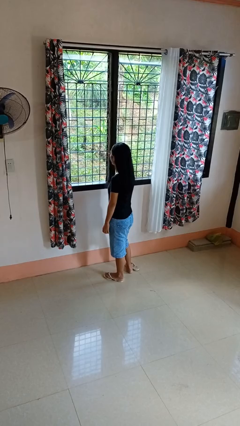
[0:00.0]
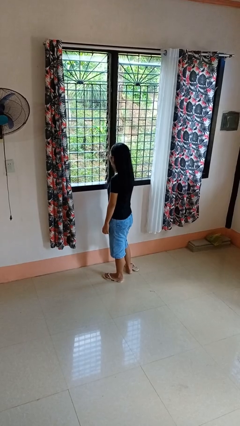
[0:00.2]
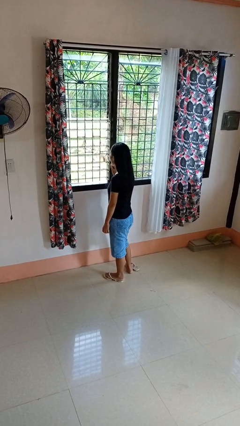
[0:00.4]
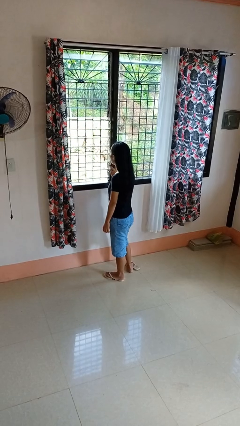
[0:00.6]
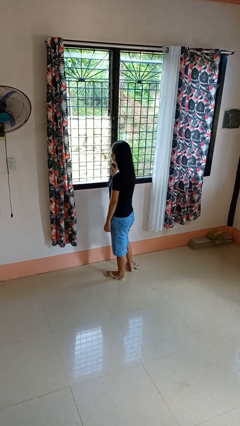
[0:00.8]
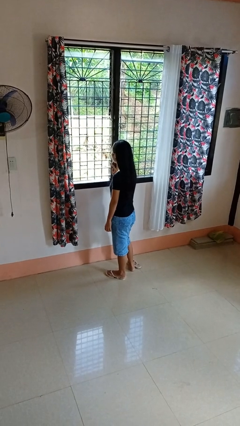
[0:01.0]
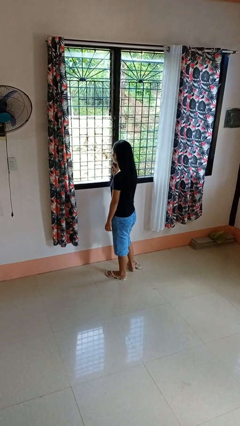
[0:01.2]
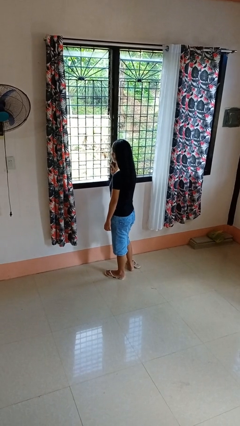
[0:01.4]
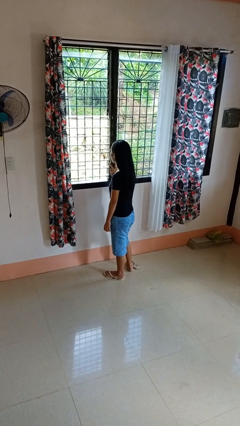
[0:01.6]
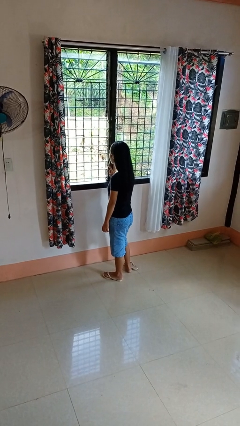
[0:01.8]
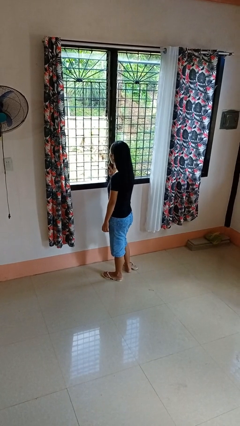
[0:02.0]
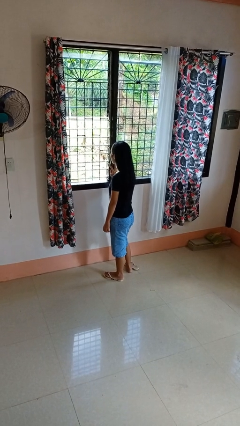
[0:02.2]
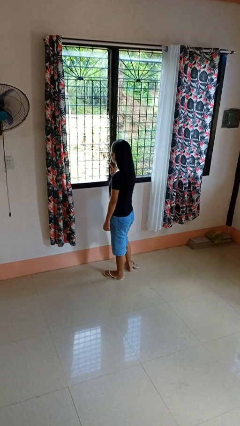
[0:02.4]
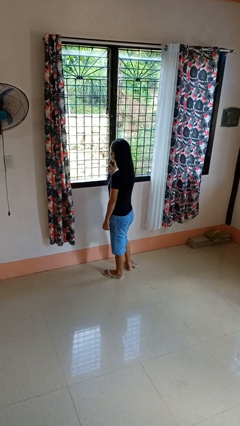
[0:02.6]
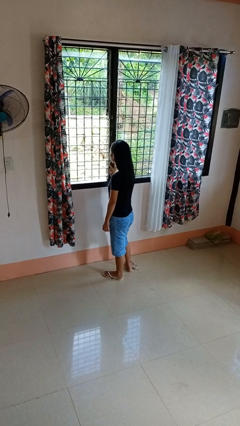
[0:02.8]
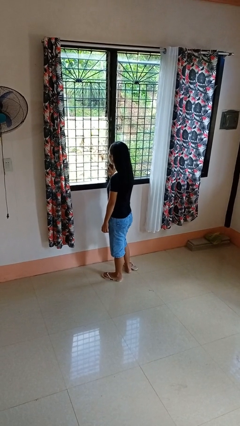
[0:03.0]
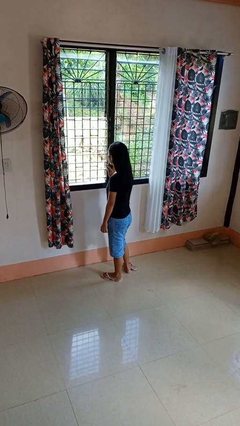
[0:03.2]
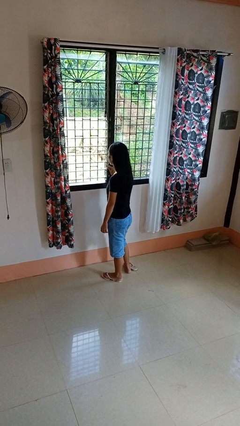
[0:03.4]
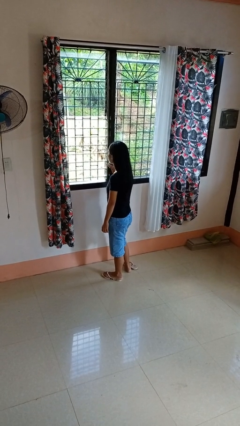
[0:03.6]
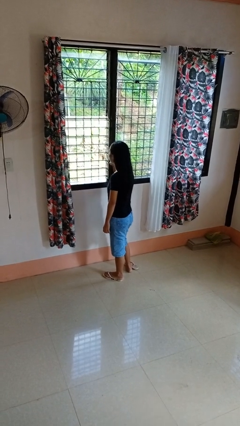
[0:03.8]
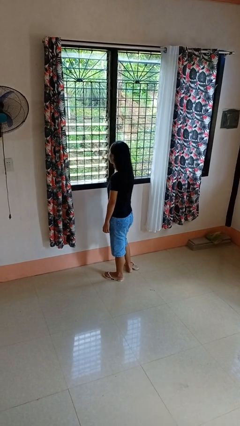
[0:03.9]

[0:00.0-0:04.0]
person opens home window

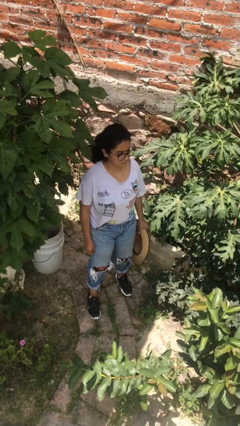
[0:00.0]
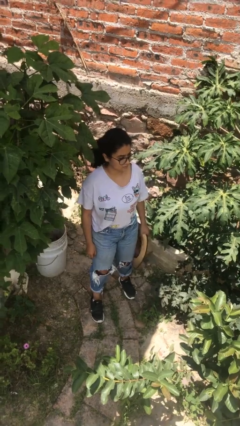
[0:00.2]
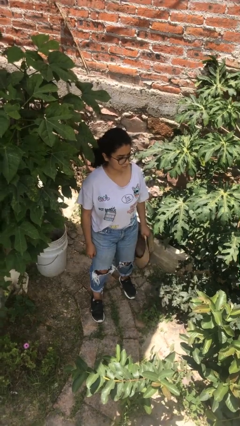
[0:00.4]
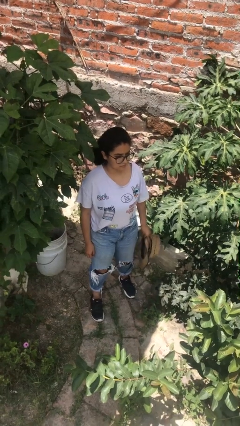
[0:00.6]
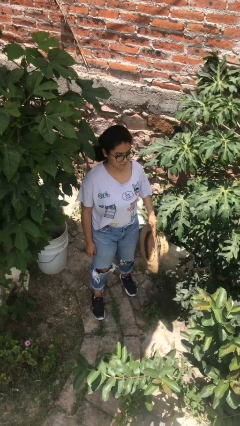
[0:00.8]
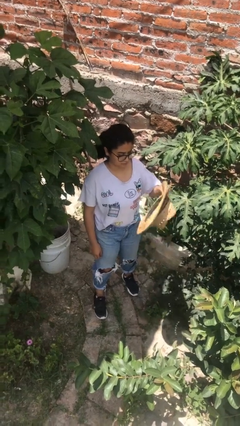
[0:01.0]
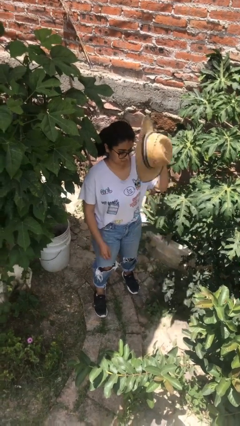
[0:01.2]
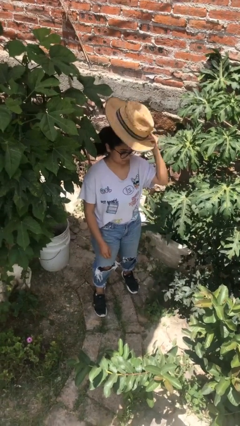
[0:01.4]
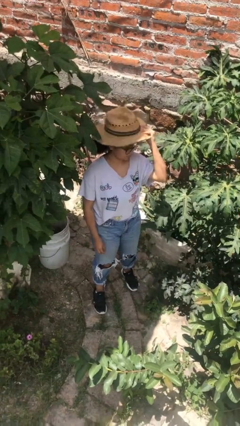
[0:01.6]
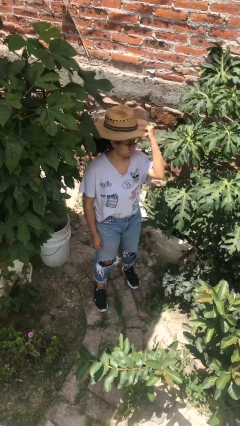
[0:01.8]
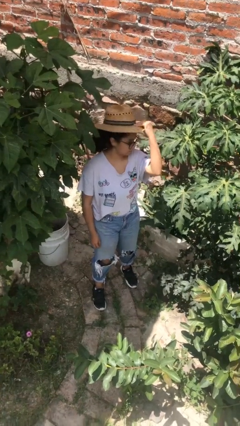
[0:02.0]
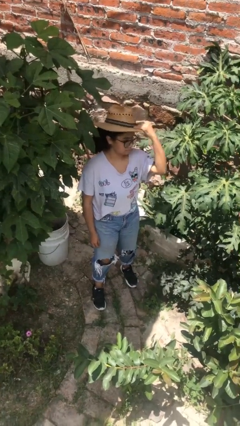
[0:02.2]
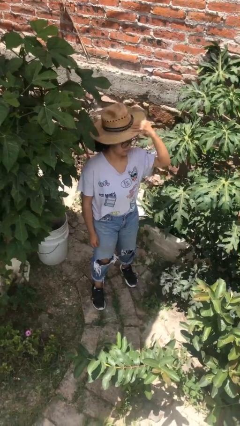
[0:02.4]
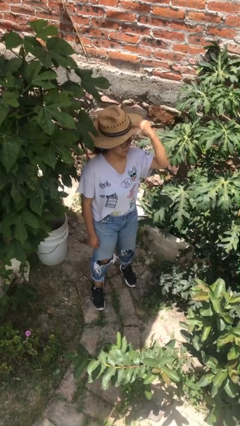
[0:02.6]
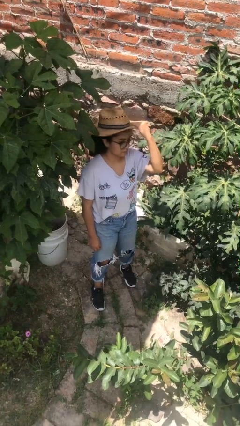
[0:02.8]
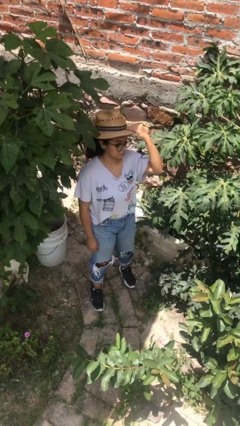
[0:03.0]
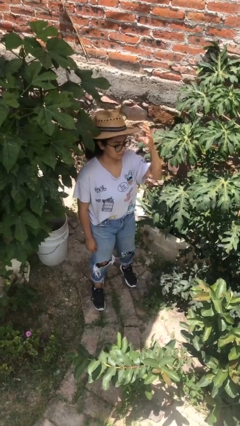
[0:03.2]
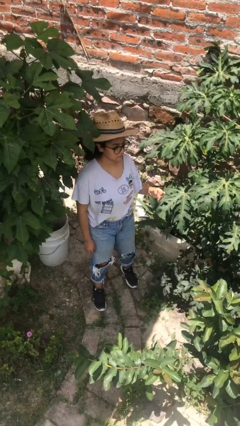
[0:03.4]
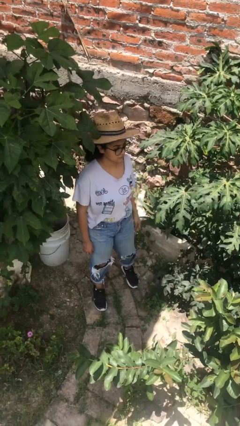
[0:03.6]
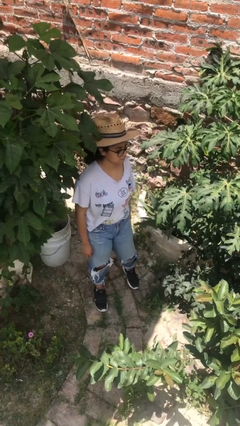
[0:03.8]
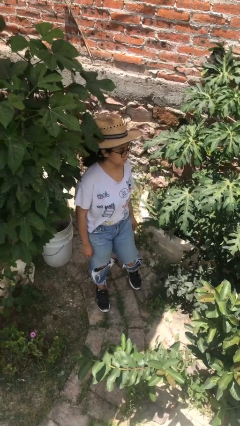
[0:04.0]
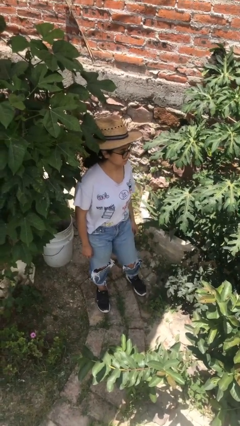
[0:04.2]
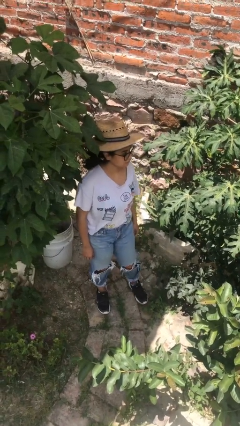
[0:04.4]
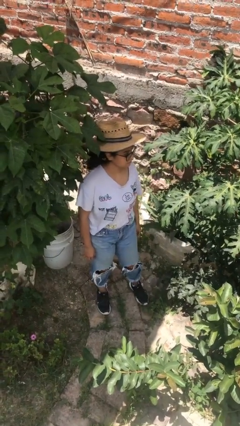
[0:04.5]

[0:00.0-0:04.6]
person puts on hat

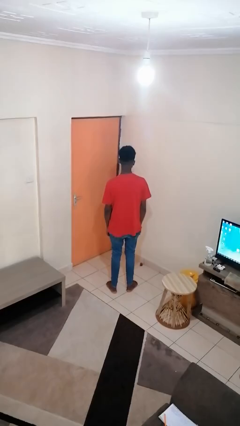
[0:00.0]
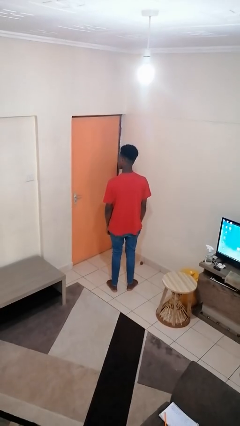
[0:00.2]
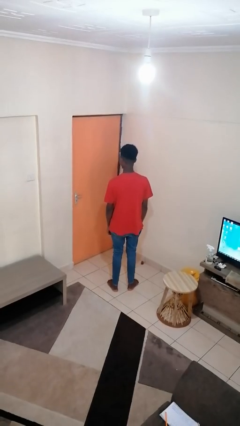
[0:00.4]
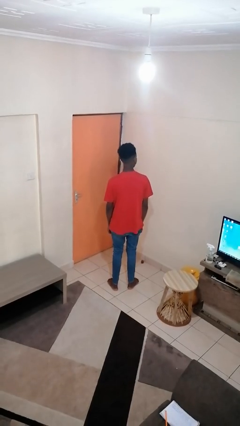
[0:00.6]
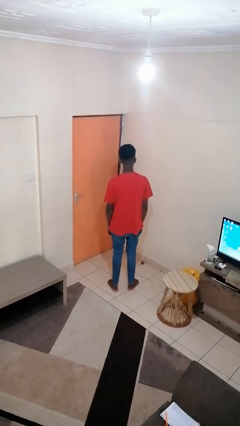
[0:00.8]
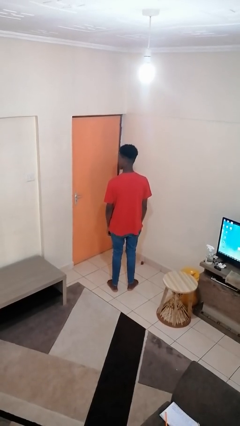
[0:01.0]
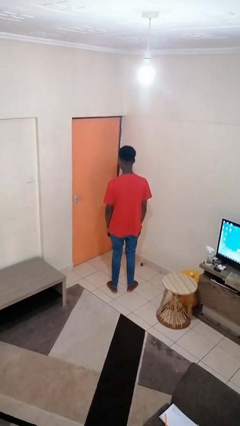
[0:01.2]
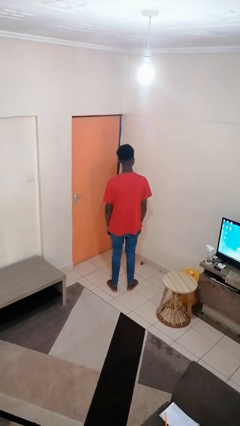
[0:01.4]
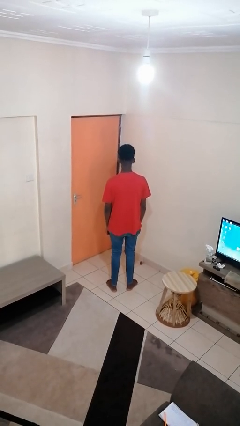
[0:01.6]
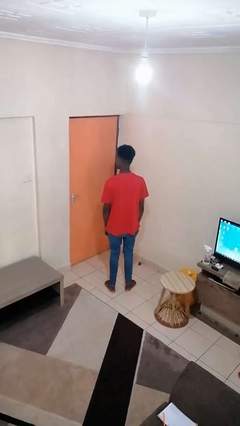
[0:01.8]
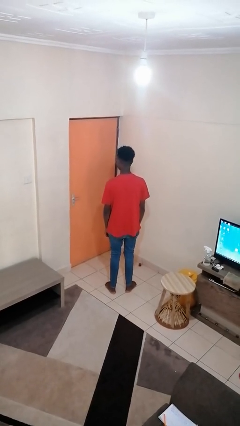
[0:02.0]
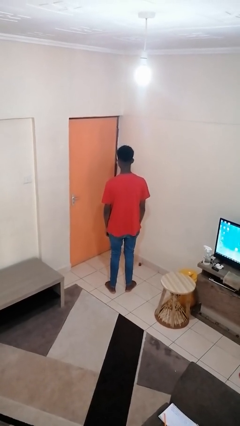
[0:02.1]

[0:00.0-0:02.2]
person shakes head

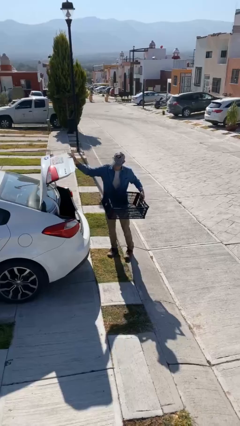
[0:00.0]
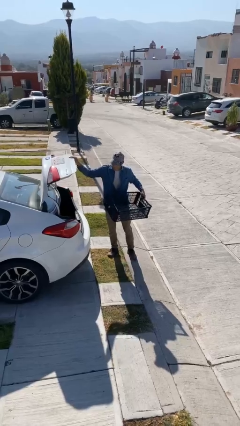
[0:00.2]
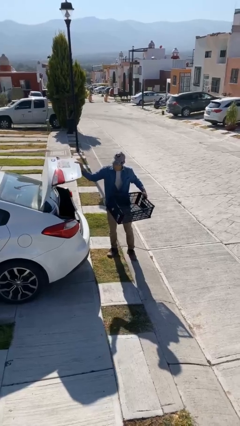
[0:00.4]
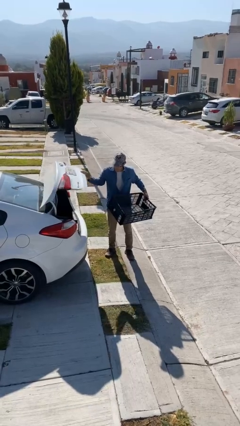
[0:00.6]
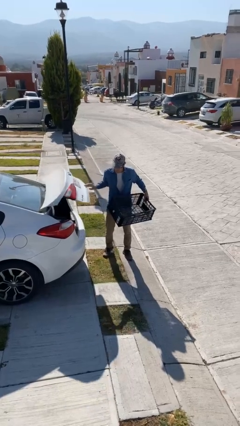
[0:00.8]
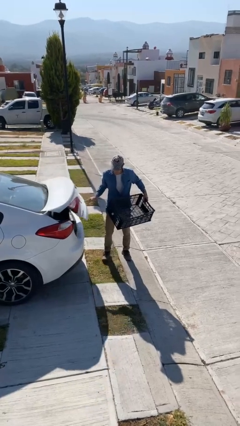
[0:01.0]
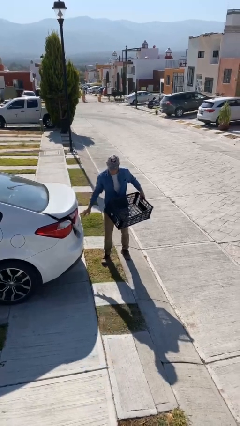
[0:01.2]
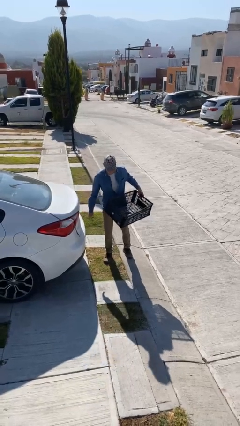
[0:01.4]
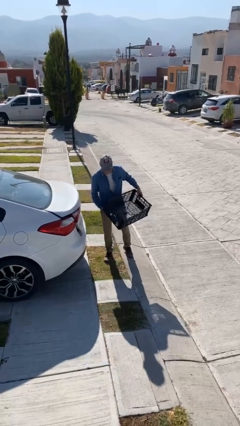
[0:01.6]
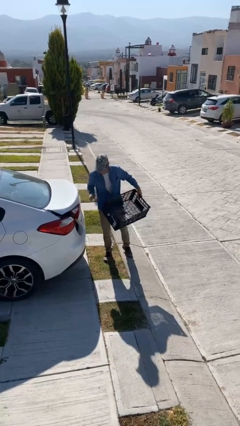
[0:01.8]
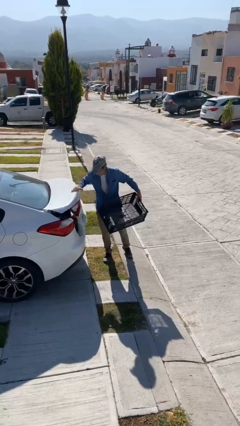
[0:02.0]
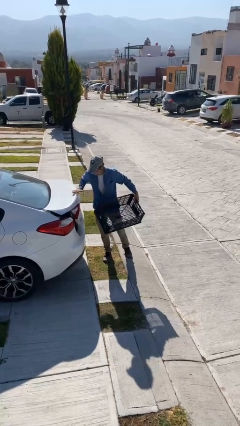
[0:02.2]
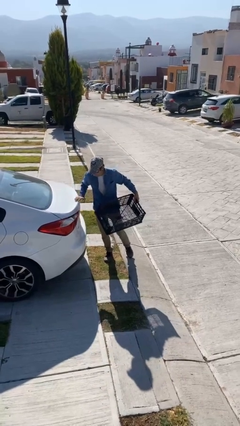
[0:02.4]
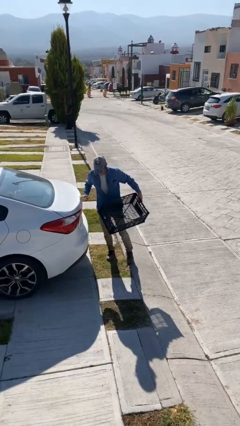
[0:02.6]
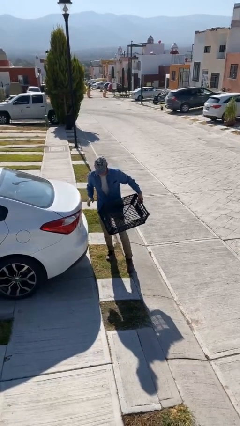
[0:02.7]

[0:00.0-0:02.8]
person closes car trunk

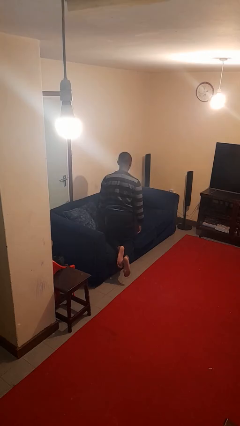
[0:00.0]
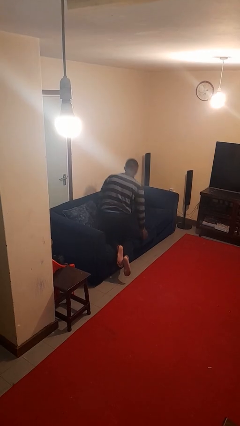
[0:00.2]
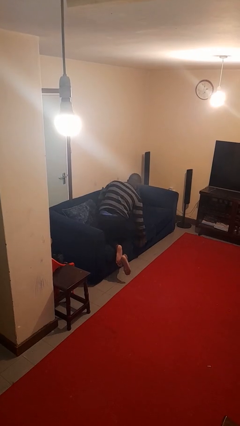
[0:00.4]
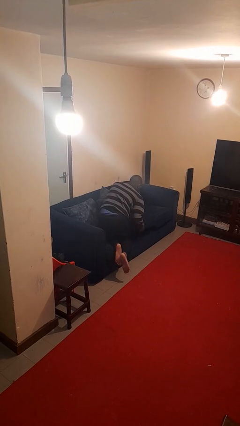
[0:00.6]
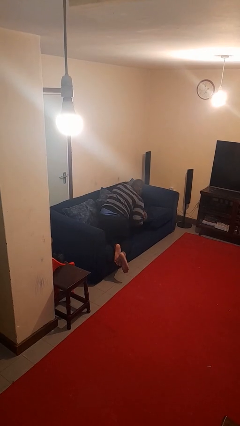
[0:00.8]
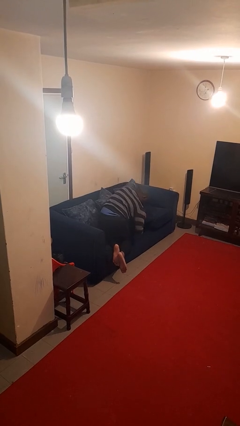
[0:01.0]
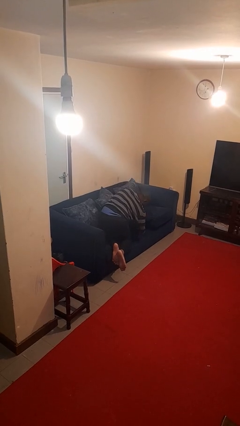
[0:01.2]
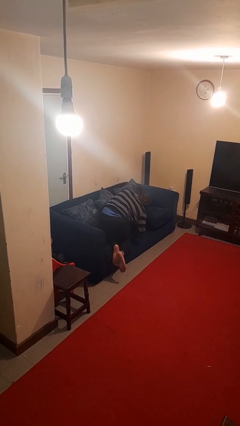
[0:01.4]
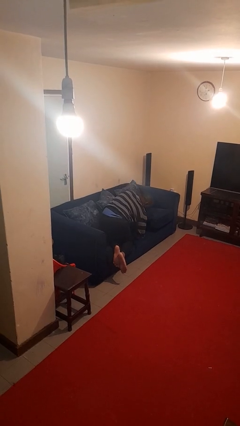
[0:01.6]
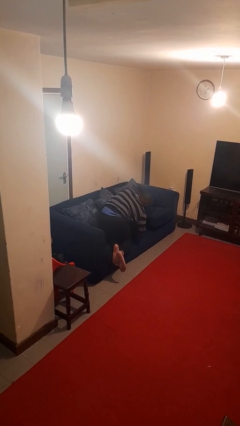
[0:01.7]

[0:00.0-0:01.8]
person searches in couch

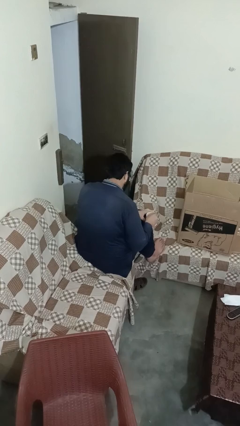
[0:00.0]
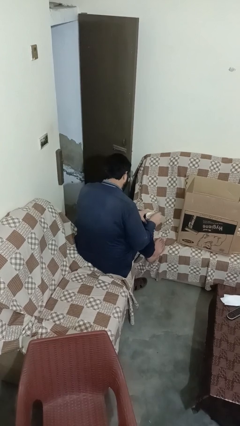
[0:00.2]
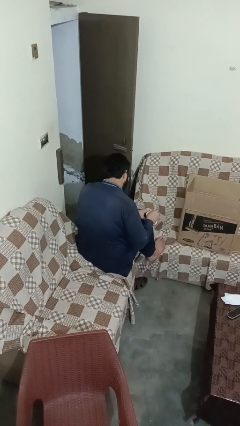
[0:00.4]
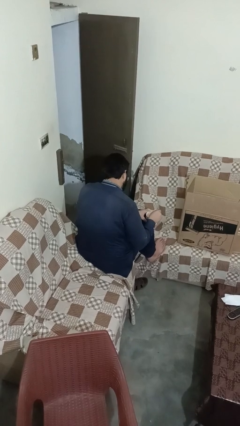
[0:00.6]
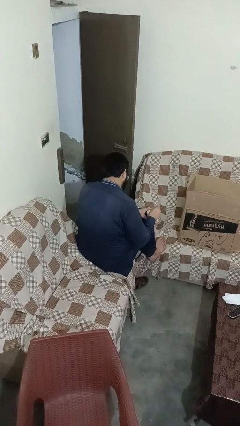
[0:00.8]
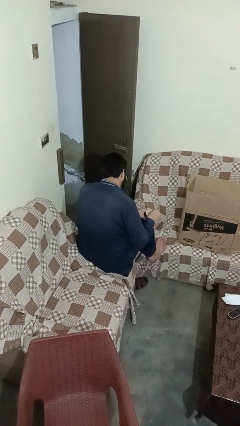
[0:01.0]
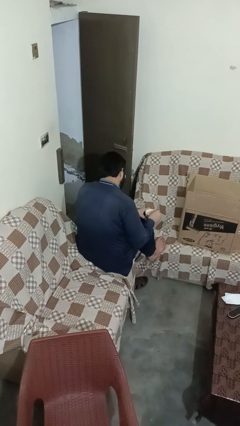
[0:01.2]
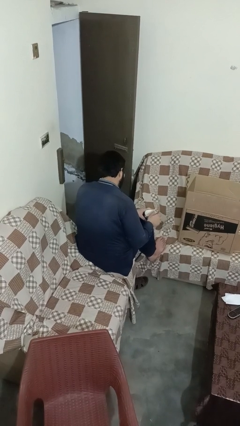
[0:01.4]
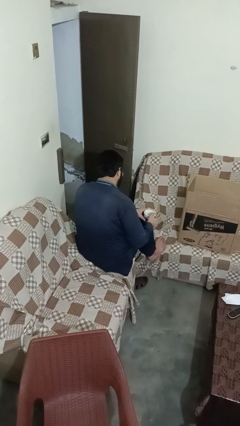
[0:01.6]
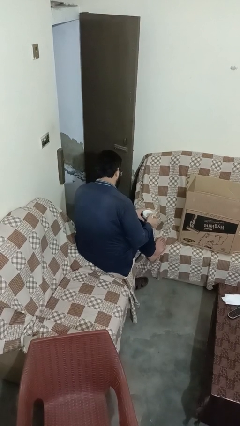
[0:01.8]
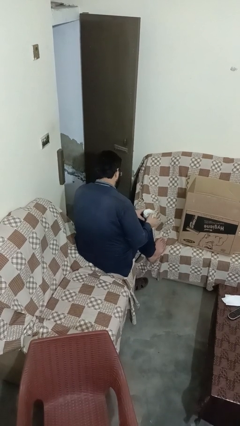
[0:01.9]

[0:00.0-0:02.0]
person stirs mug
